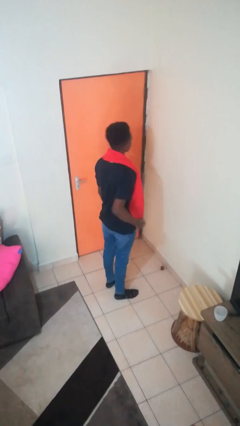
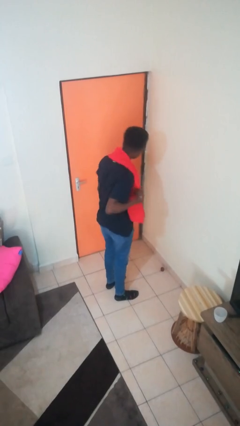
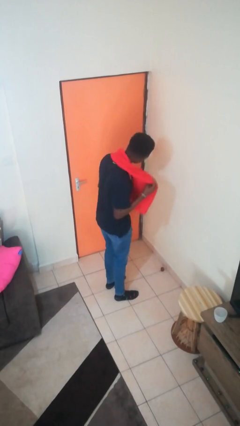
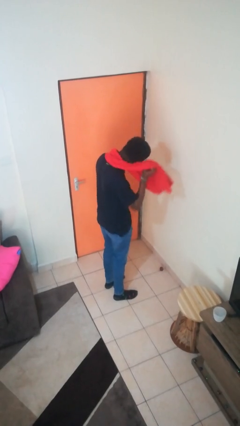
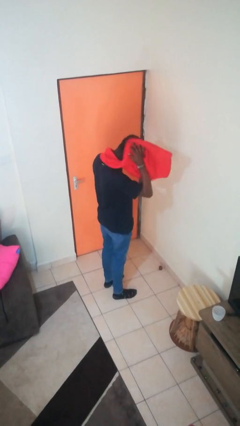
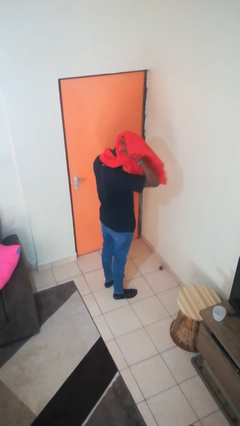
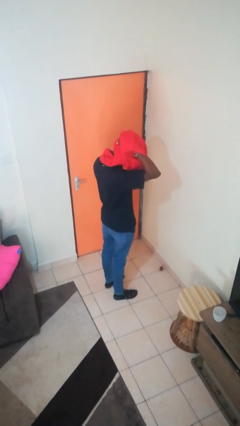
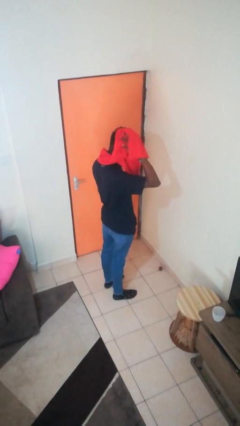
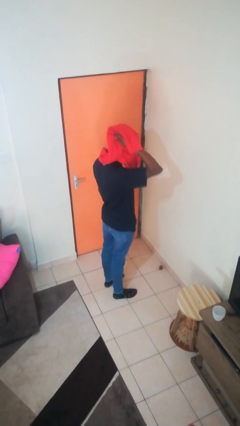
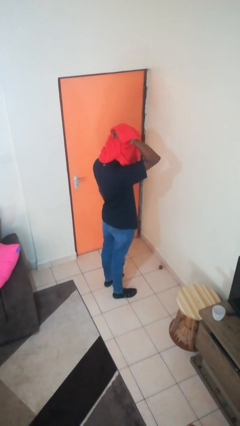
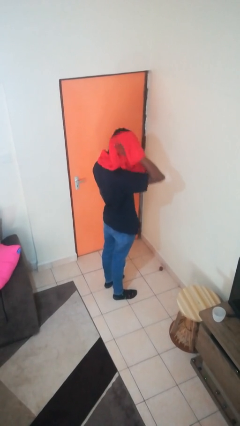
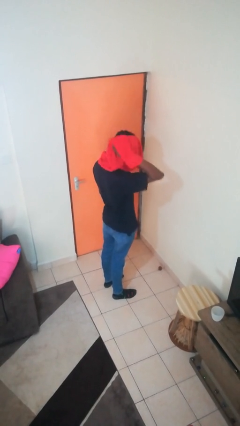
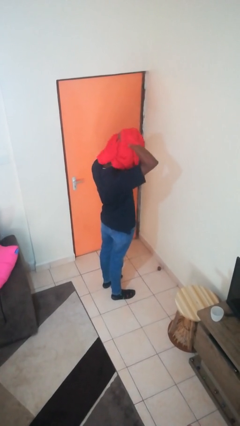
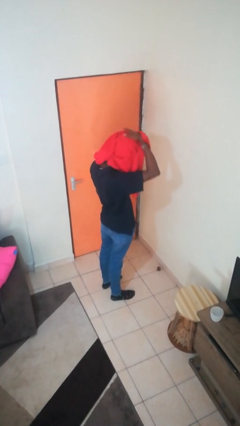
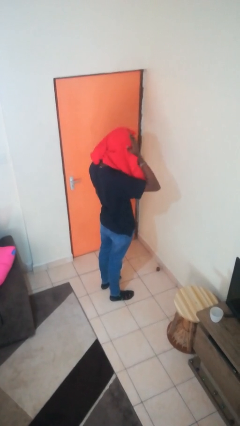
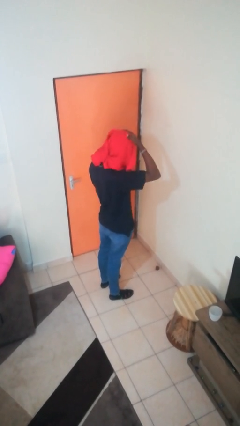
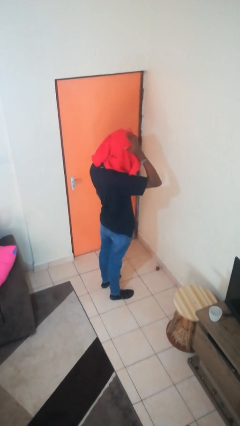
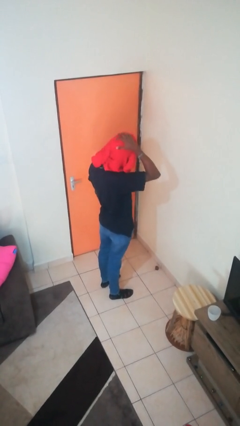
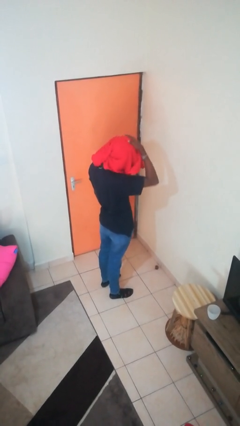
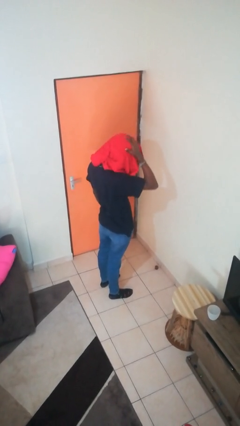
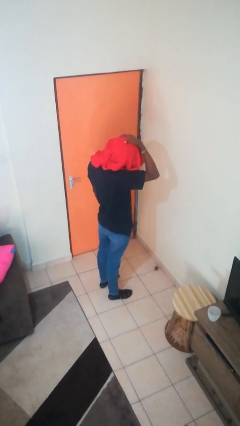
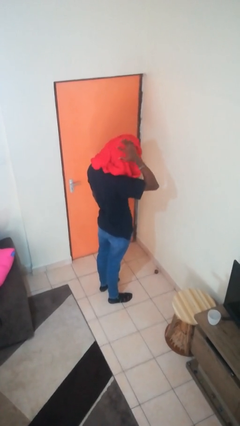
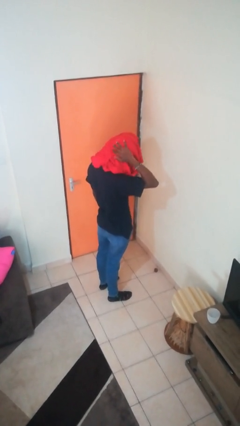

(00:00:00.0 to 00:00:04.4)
person dries hair with towel

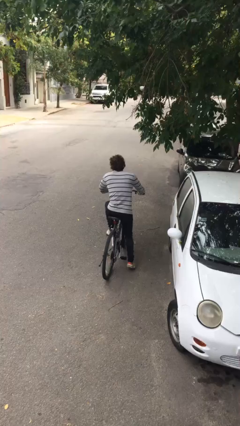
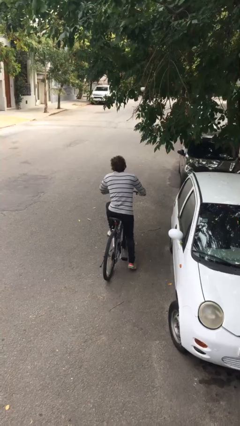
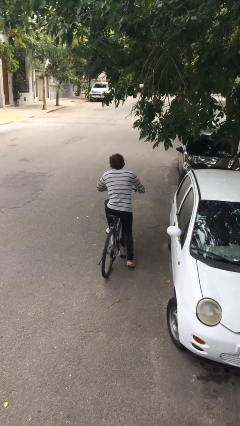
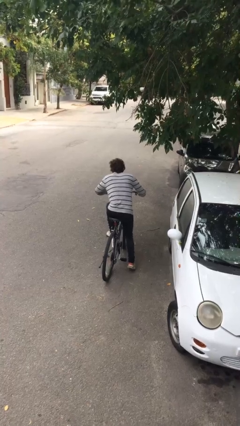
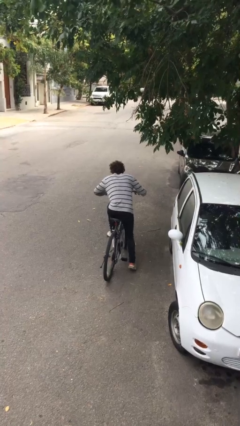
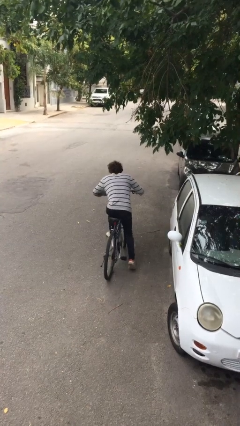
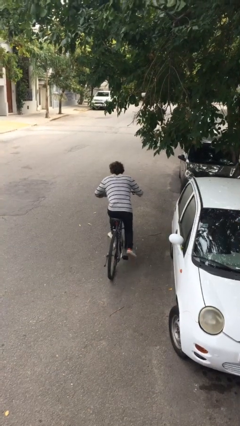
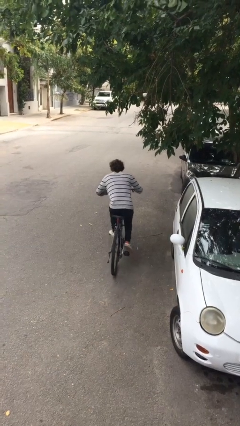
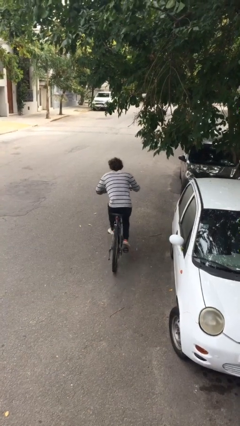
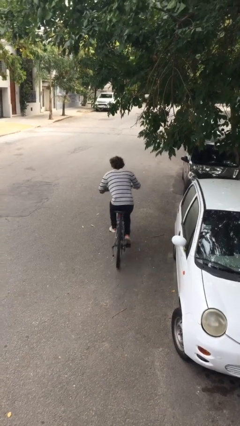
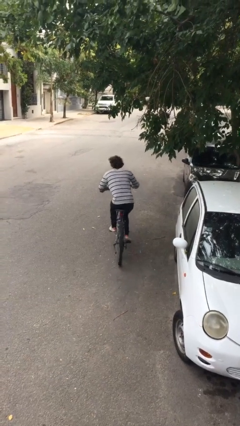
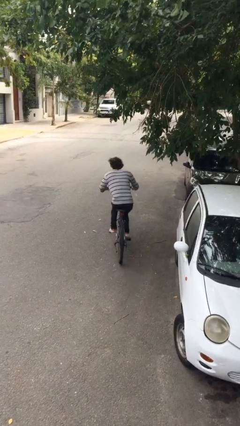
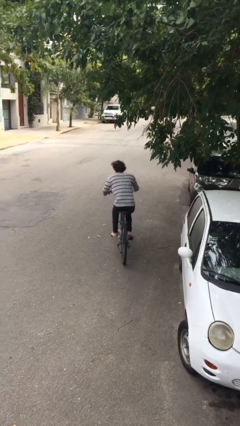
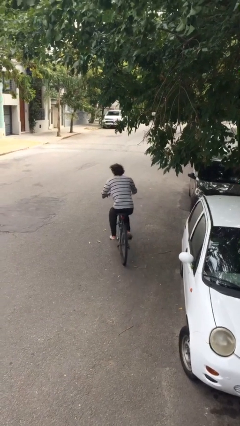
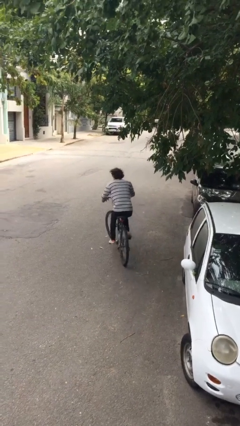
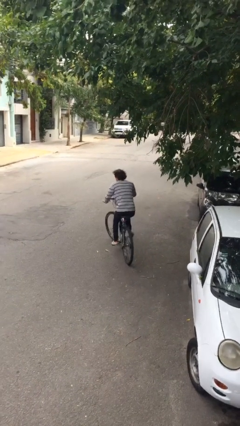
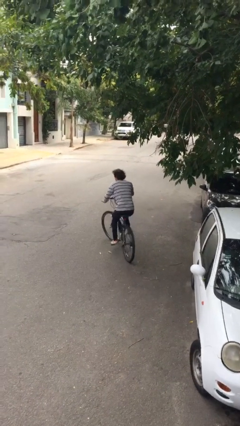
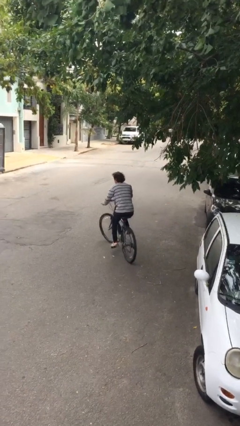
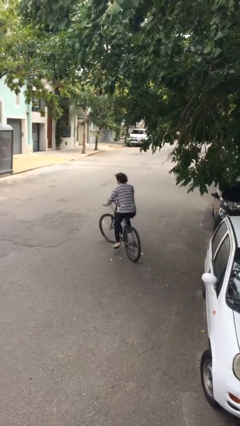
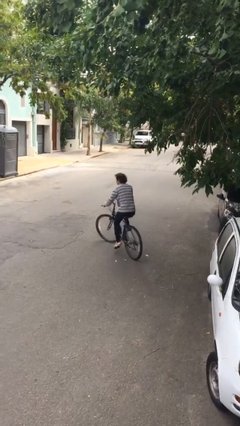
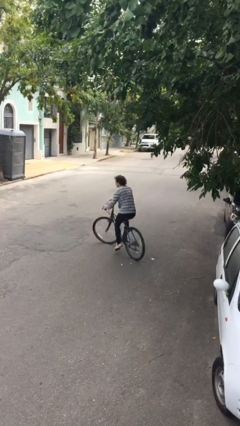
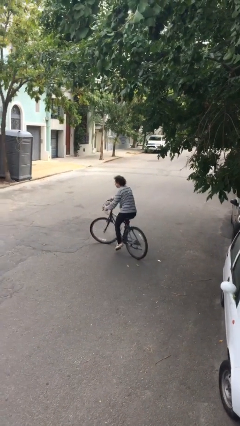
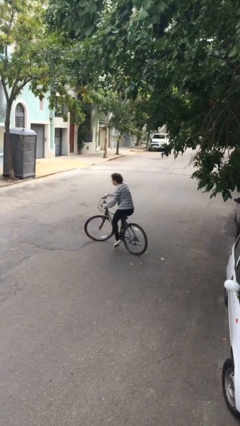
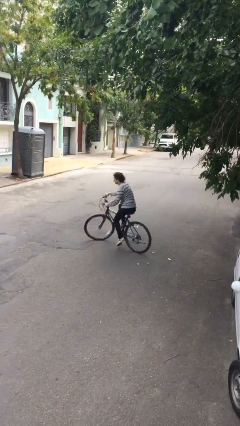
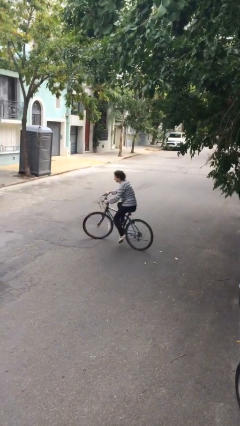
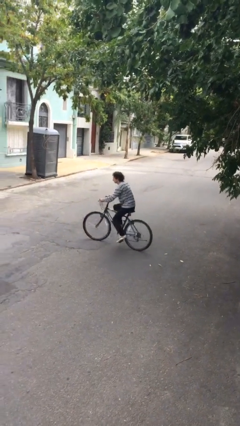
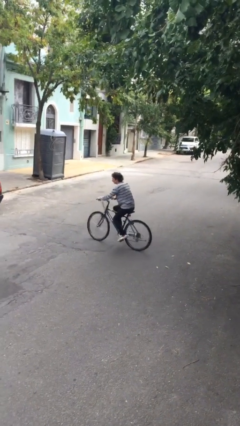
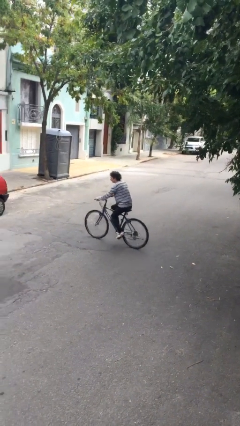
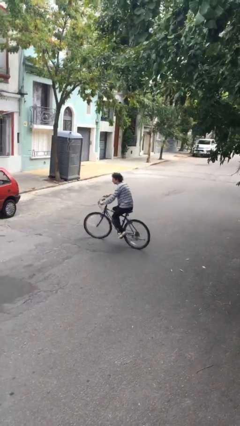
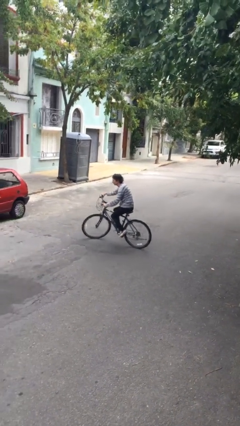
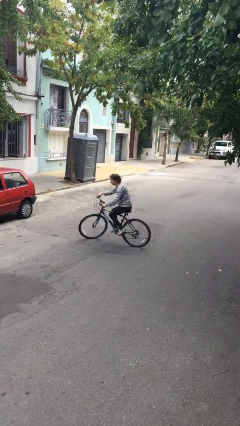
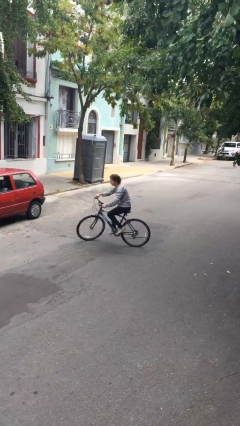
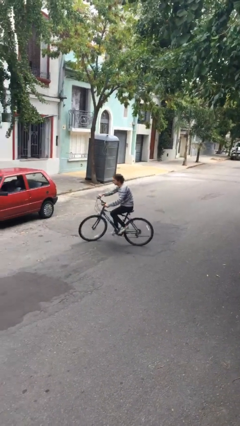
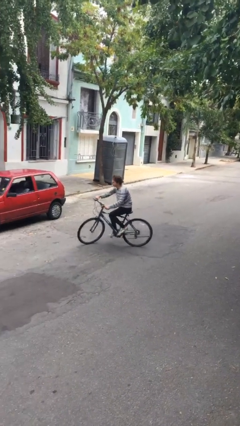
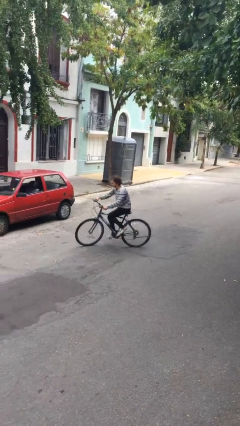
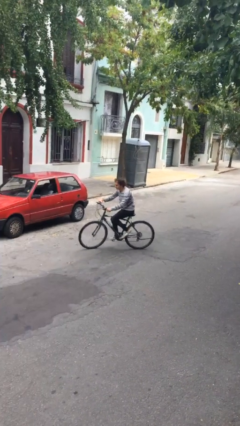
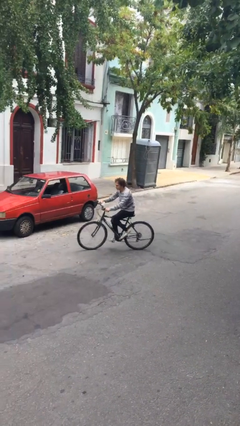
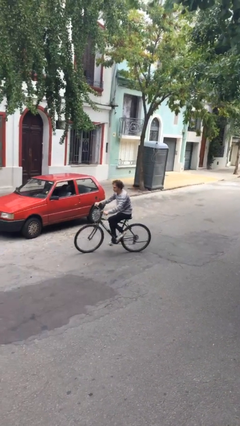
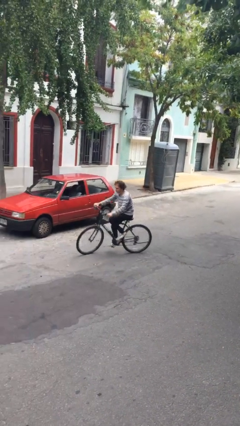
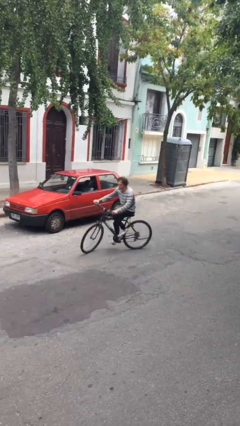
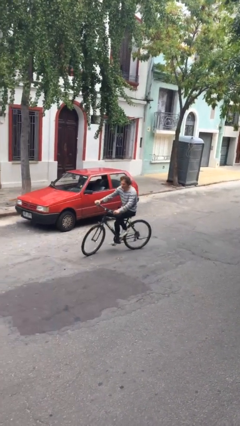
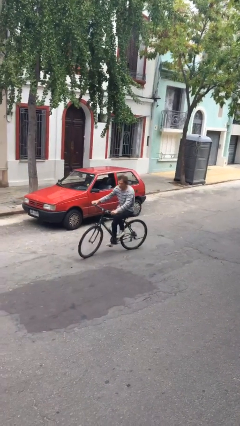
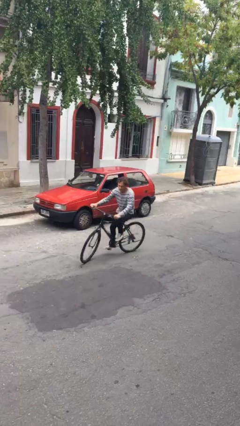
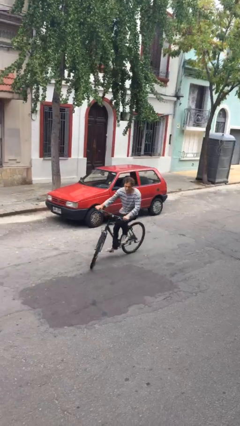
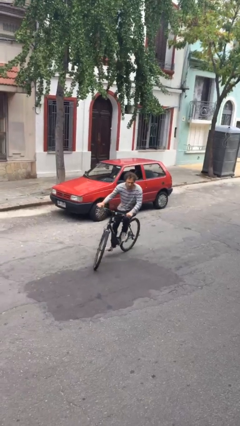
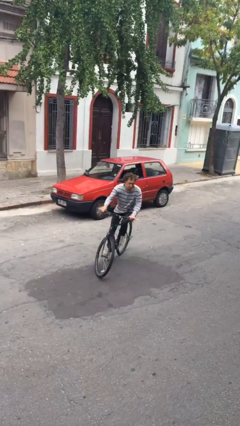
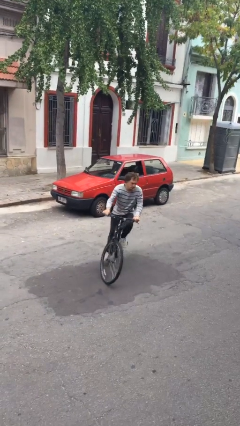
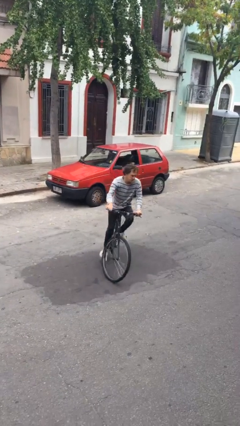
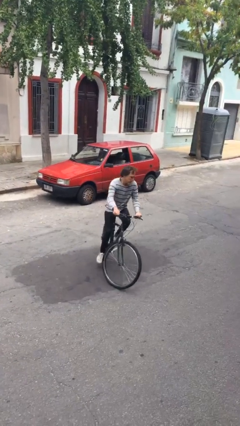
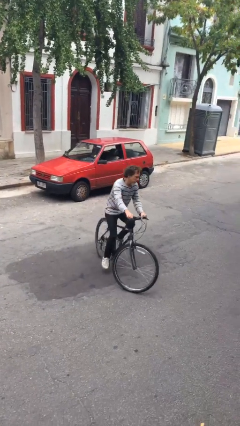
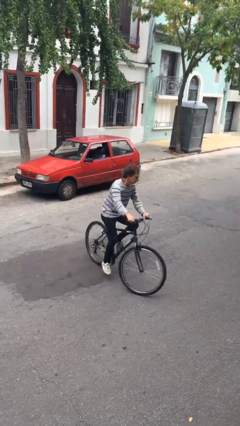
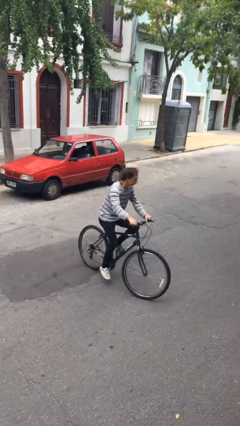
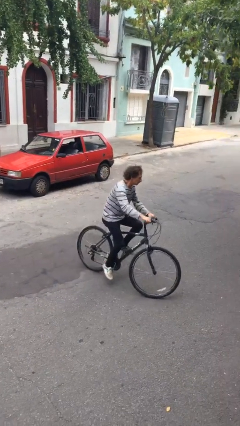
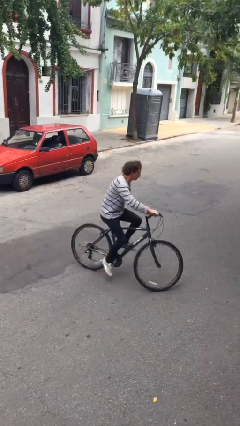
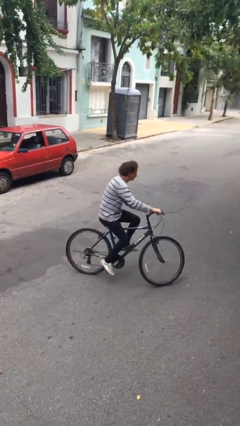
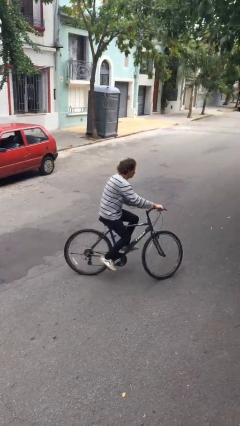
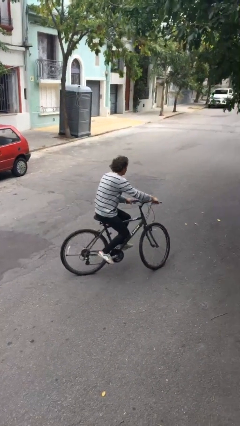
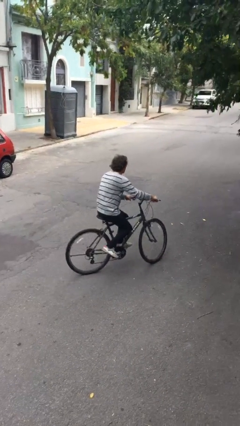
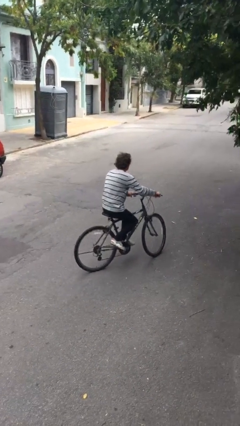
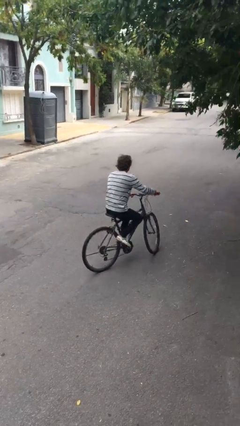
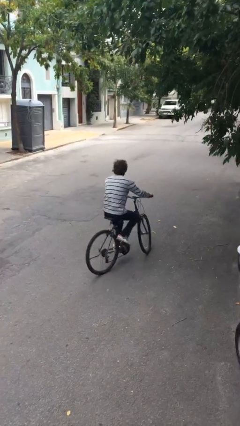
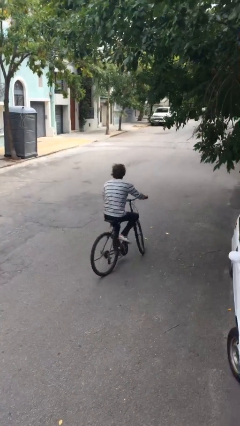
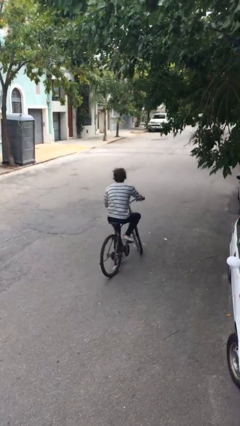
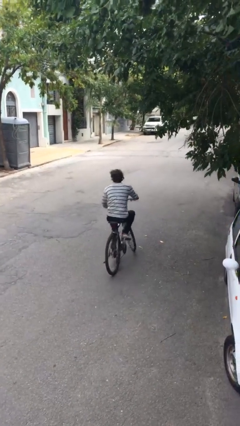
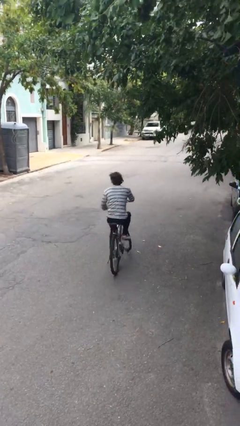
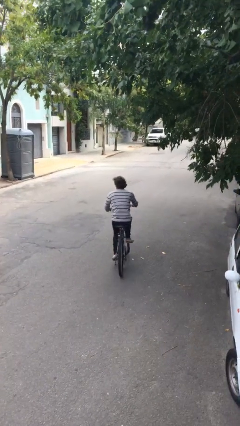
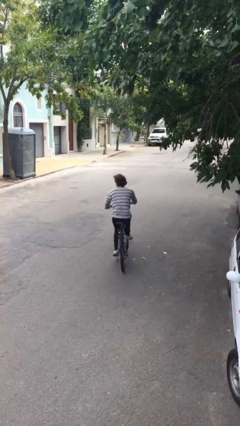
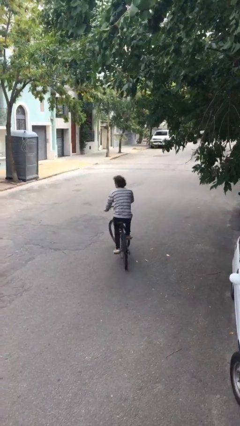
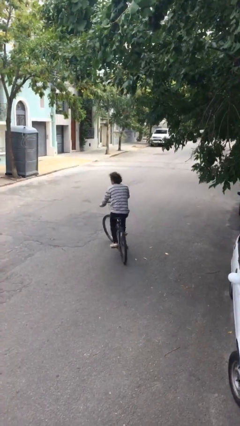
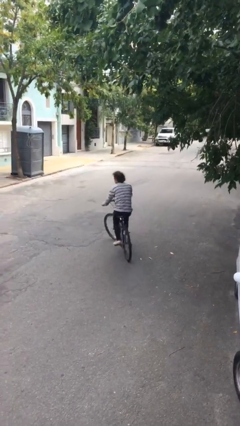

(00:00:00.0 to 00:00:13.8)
person rides bicycle

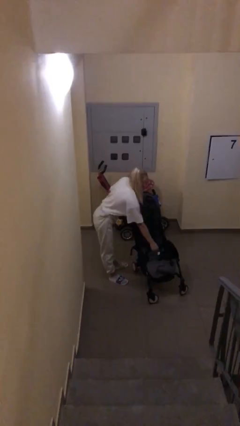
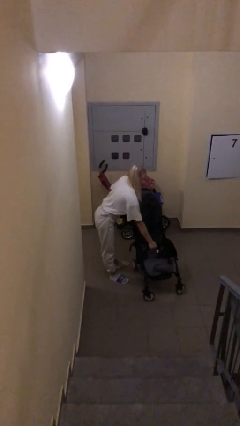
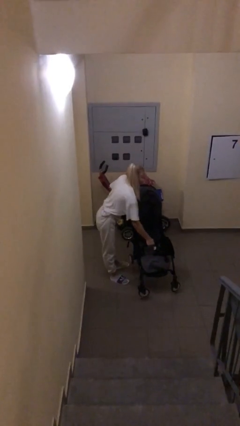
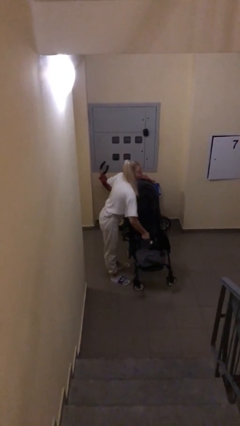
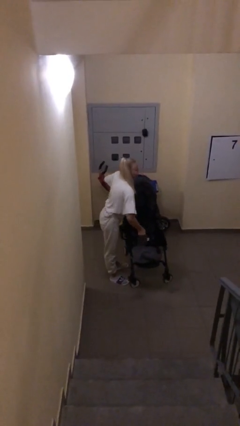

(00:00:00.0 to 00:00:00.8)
person picks up object from floor
